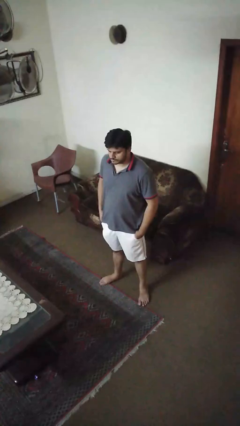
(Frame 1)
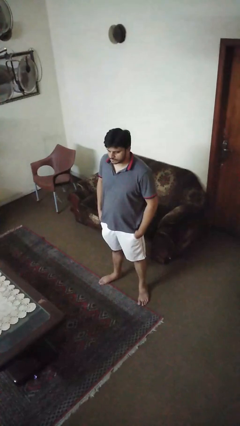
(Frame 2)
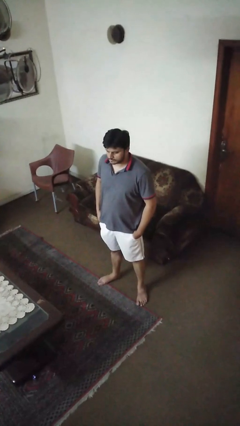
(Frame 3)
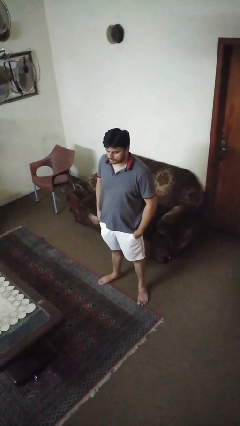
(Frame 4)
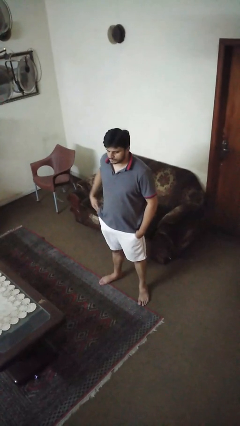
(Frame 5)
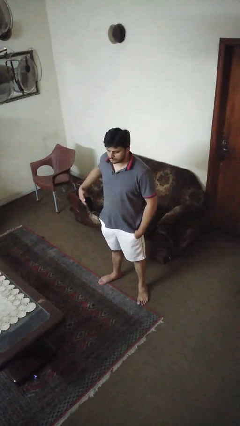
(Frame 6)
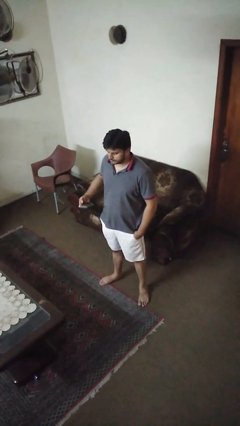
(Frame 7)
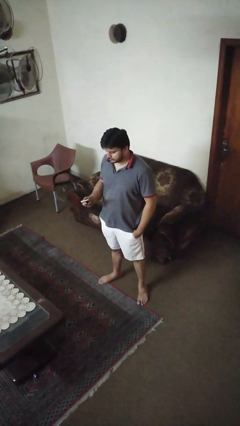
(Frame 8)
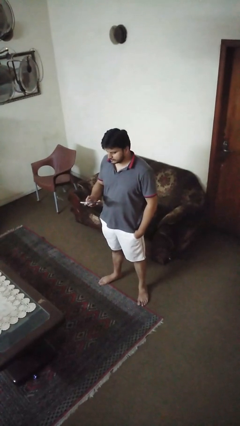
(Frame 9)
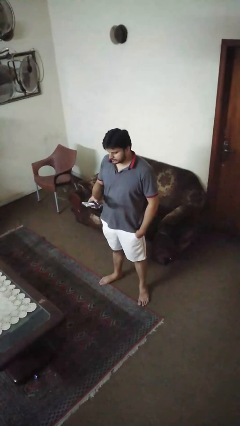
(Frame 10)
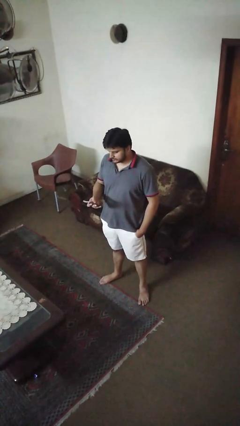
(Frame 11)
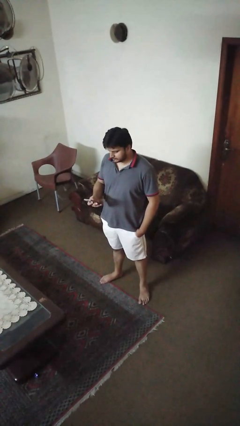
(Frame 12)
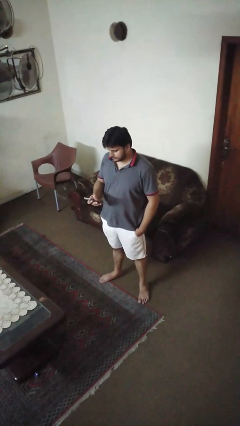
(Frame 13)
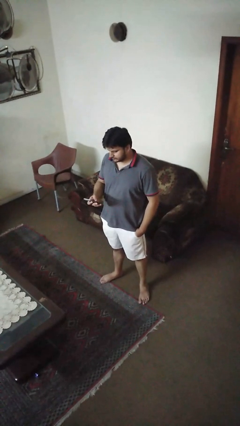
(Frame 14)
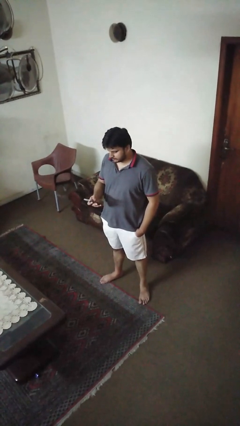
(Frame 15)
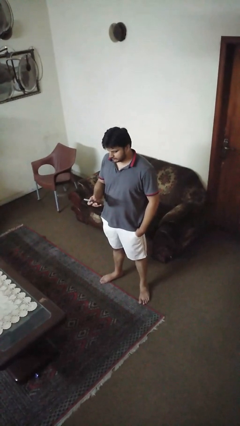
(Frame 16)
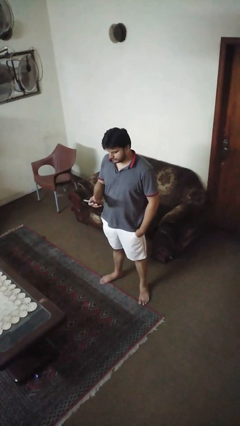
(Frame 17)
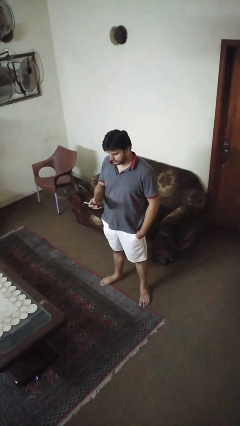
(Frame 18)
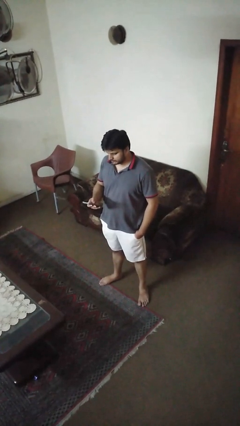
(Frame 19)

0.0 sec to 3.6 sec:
person takes phone from pocket

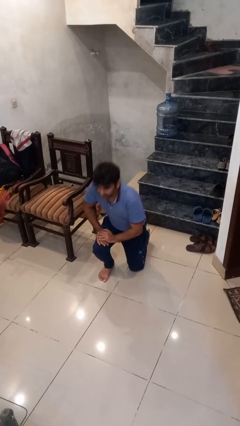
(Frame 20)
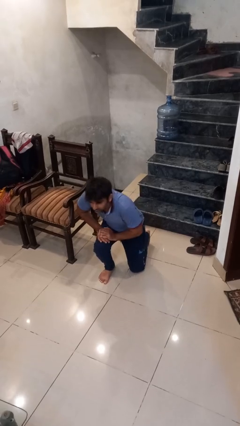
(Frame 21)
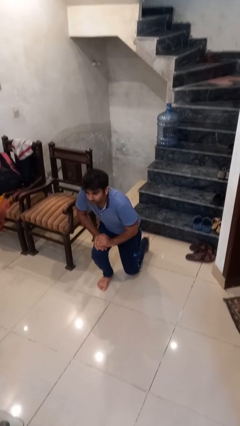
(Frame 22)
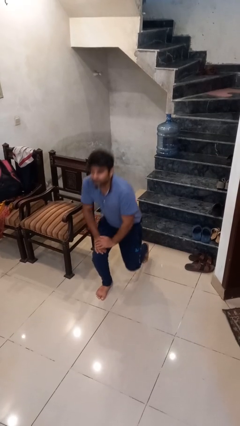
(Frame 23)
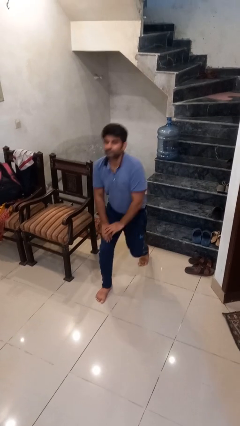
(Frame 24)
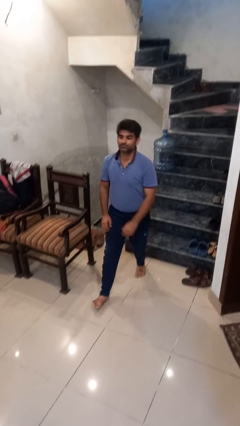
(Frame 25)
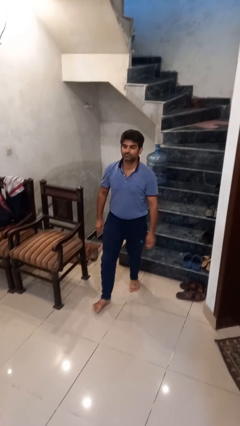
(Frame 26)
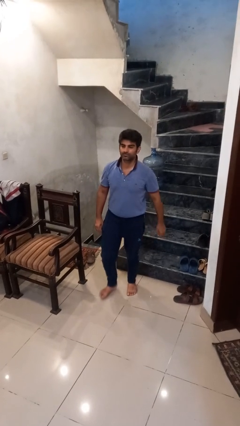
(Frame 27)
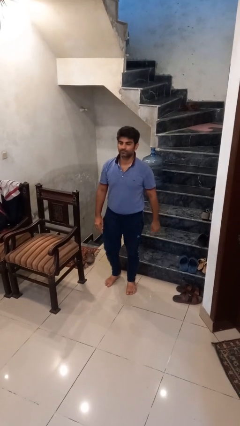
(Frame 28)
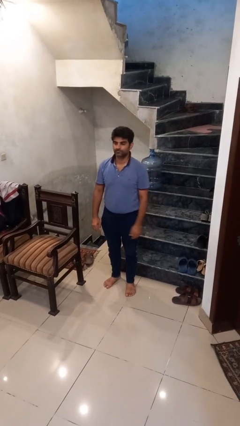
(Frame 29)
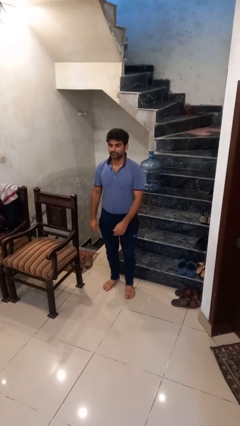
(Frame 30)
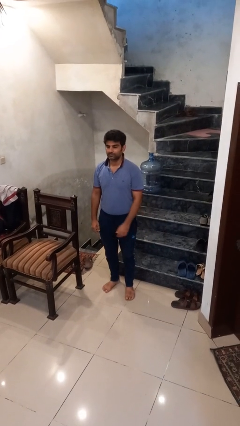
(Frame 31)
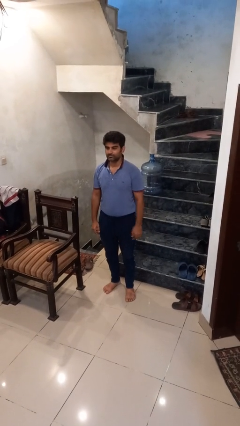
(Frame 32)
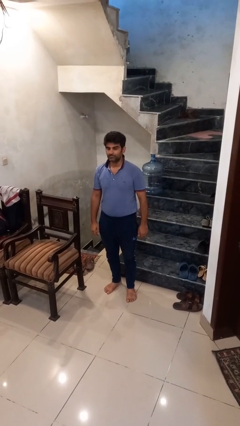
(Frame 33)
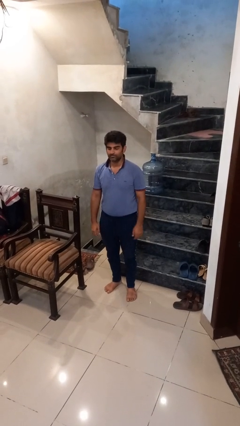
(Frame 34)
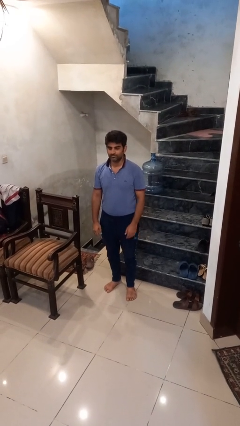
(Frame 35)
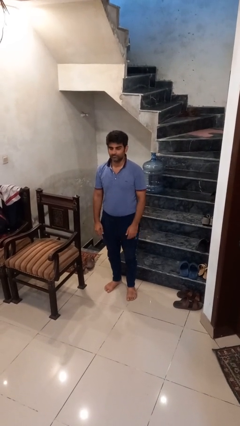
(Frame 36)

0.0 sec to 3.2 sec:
person stands up from floor

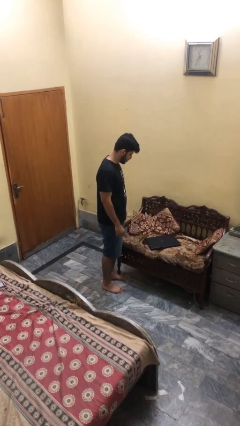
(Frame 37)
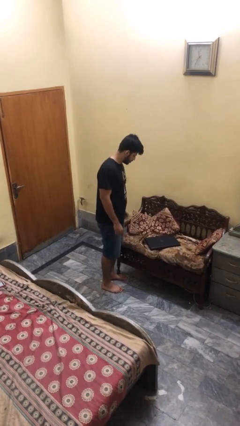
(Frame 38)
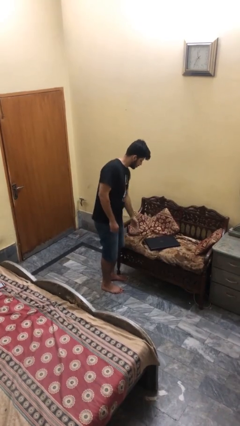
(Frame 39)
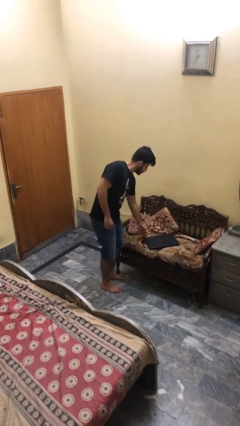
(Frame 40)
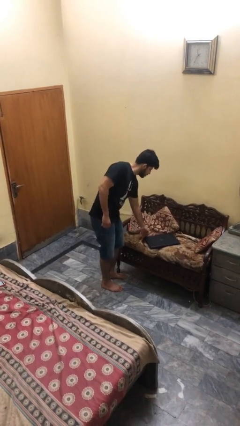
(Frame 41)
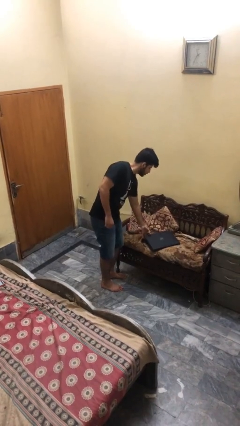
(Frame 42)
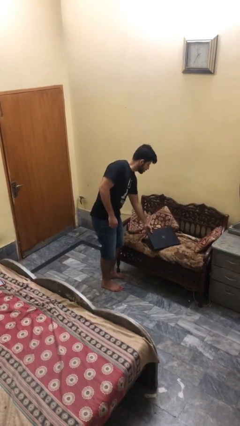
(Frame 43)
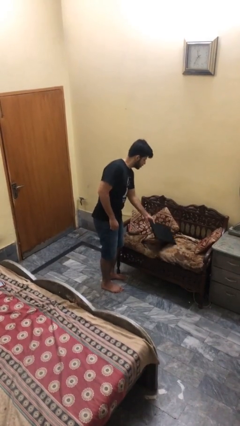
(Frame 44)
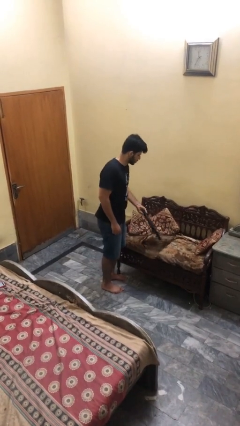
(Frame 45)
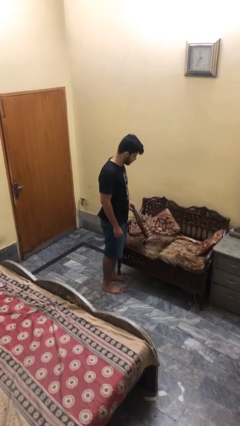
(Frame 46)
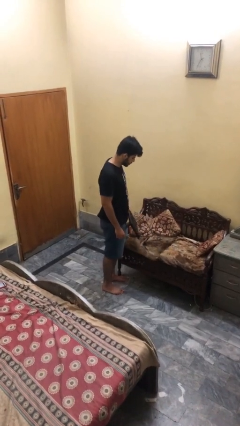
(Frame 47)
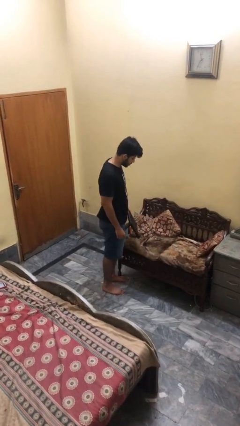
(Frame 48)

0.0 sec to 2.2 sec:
person picks up object from couch

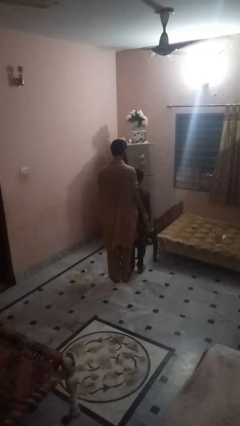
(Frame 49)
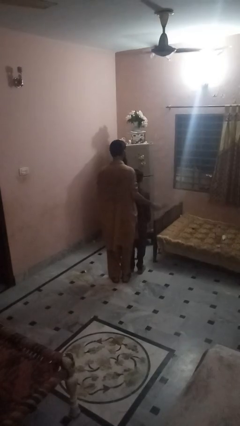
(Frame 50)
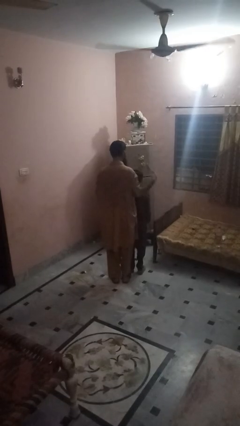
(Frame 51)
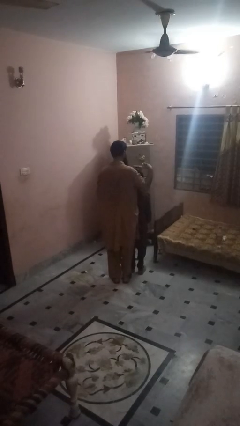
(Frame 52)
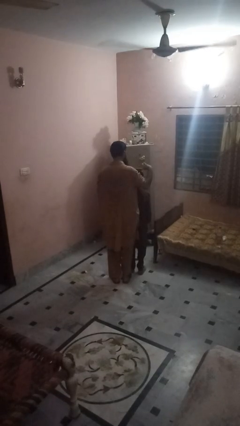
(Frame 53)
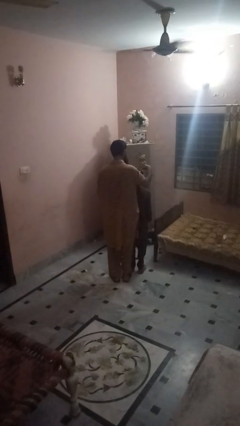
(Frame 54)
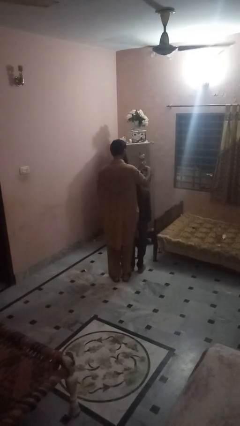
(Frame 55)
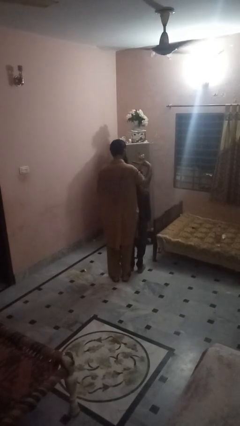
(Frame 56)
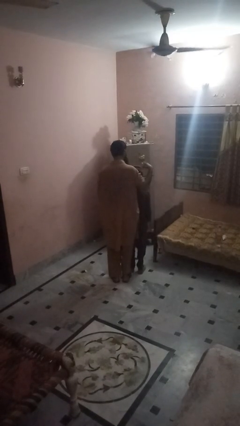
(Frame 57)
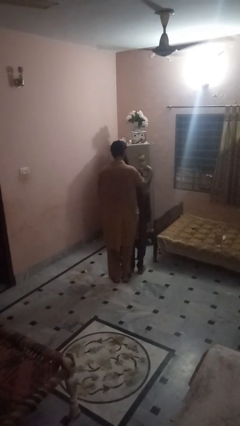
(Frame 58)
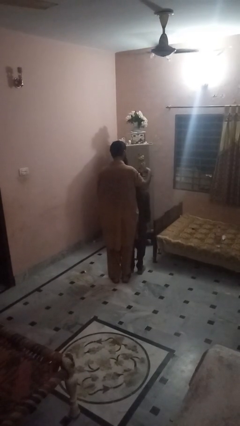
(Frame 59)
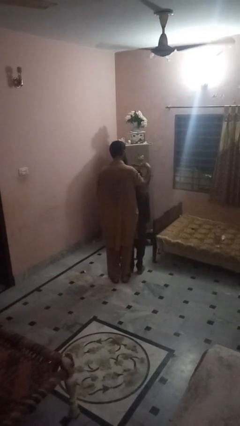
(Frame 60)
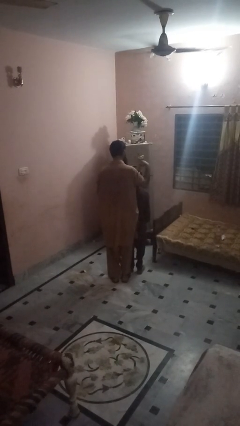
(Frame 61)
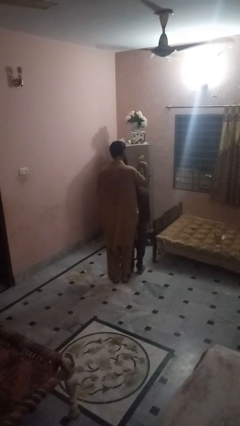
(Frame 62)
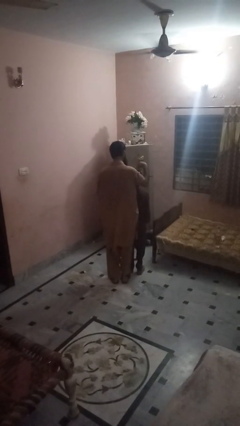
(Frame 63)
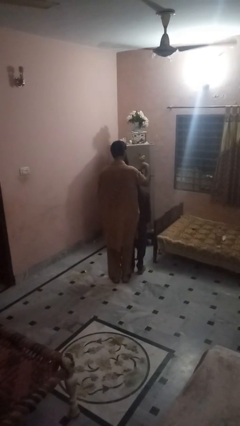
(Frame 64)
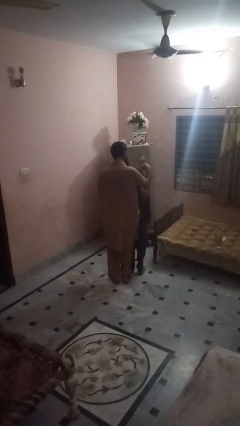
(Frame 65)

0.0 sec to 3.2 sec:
person brushes hair of person

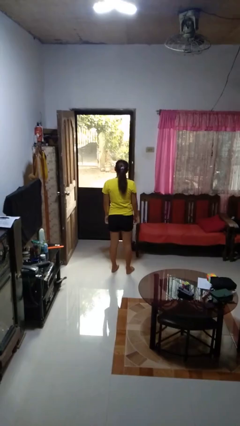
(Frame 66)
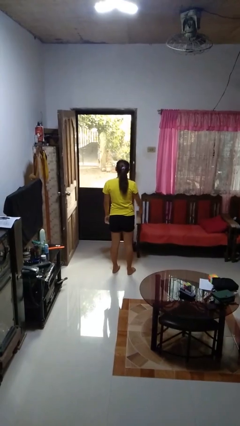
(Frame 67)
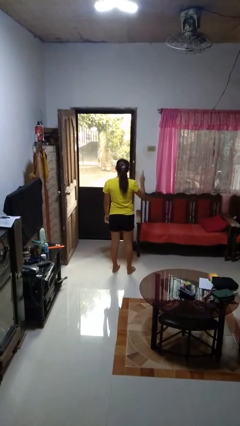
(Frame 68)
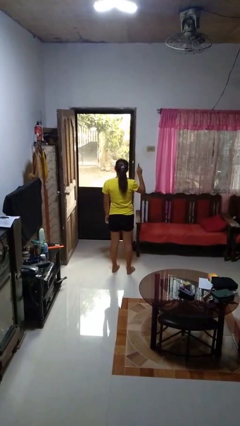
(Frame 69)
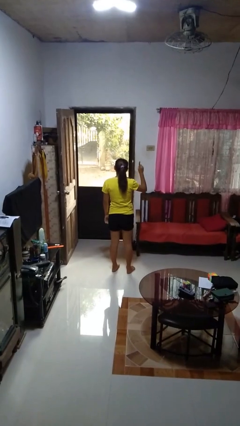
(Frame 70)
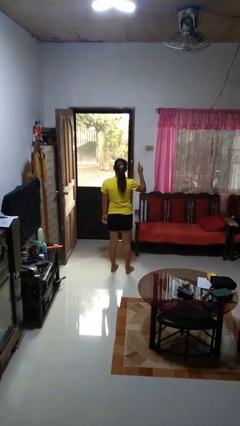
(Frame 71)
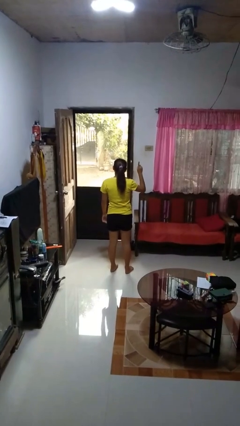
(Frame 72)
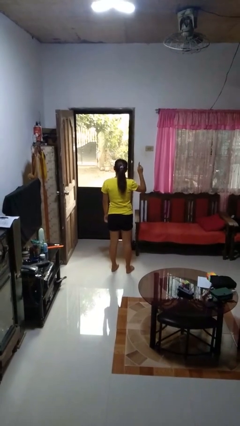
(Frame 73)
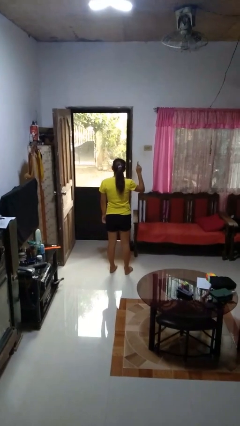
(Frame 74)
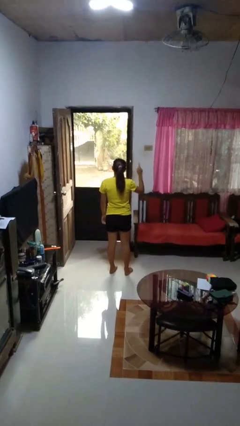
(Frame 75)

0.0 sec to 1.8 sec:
person gestures number one

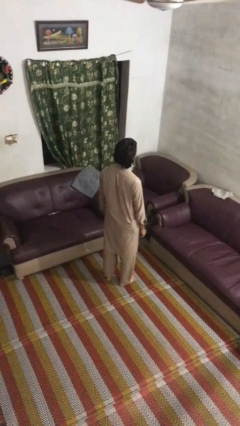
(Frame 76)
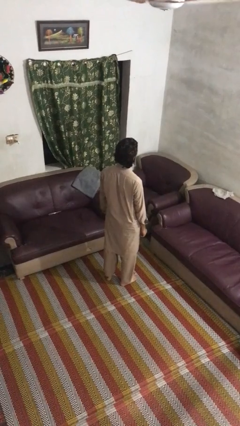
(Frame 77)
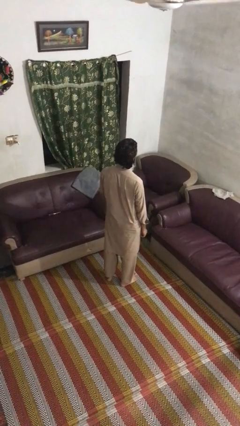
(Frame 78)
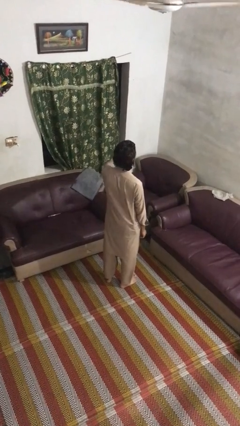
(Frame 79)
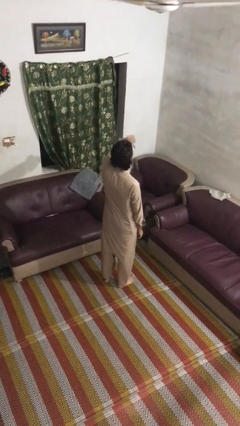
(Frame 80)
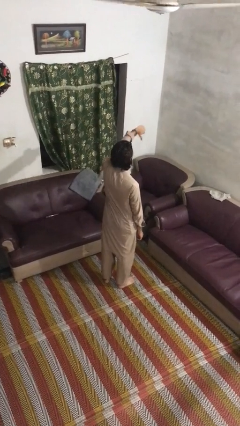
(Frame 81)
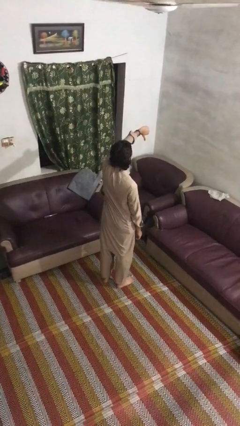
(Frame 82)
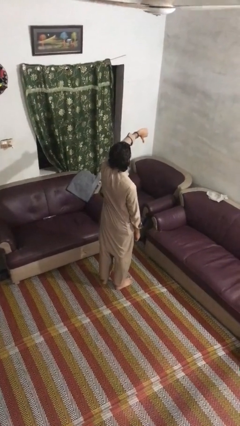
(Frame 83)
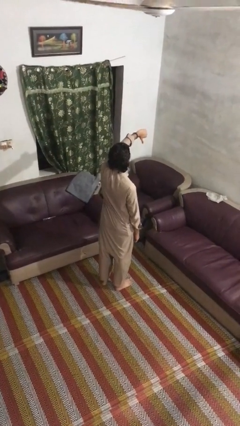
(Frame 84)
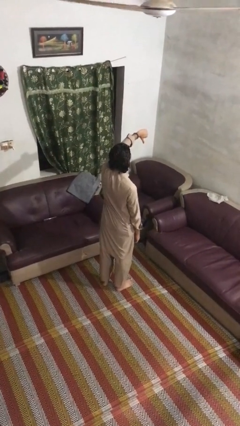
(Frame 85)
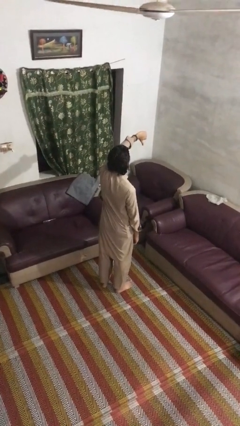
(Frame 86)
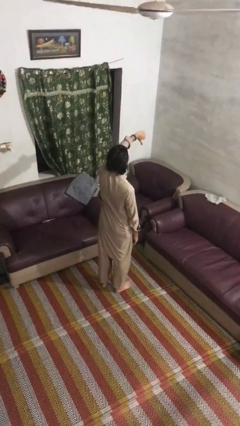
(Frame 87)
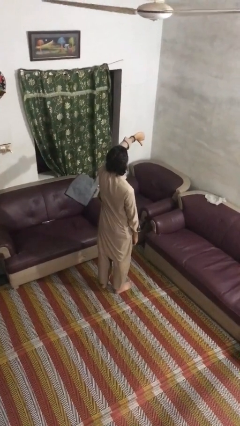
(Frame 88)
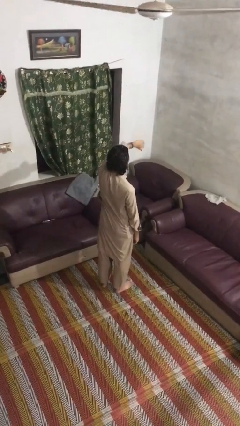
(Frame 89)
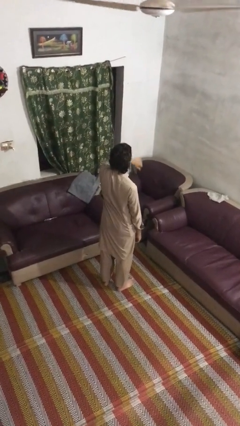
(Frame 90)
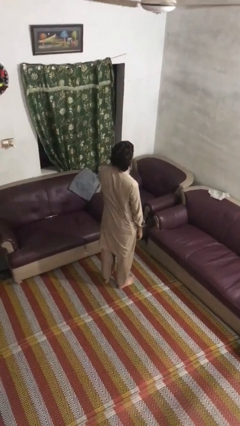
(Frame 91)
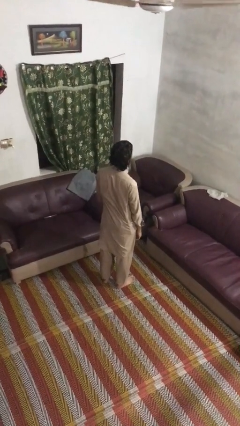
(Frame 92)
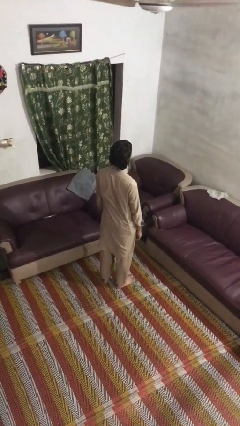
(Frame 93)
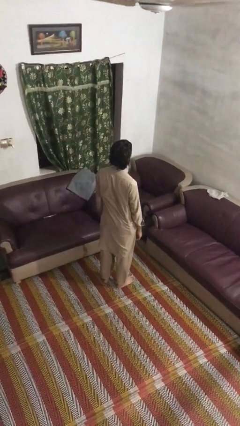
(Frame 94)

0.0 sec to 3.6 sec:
person gestures thumbs down
